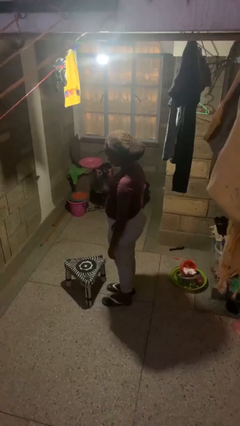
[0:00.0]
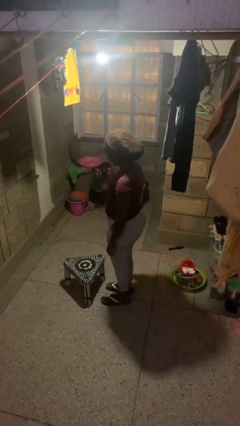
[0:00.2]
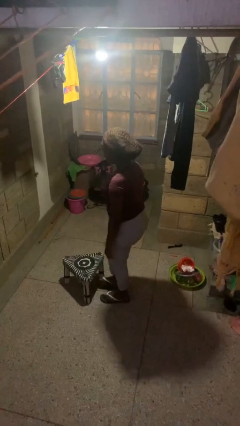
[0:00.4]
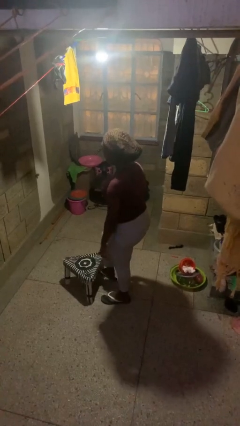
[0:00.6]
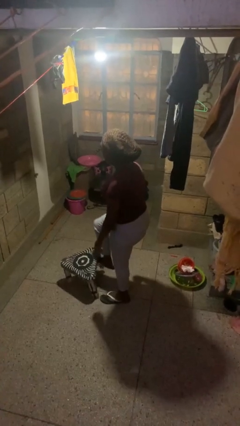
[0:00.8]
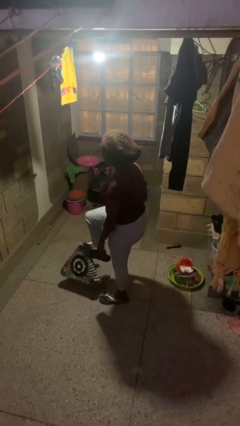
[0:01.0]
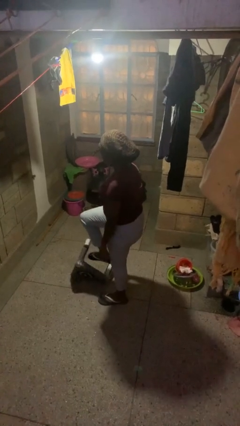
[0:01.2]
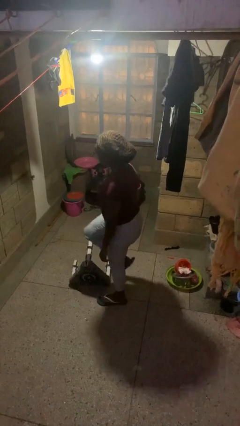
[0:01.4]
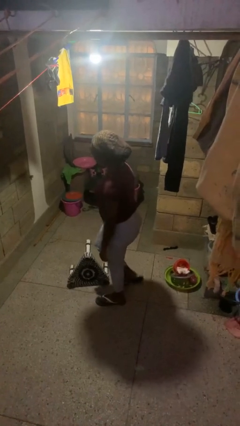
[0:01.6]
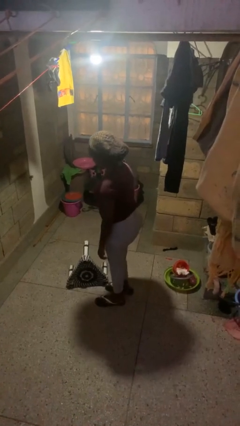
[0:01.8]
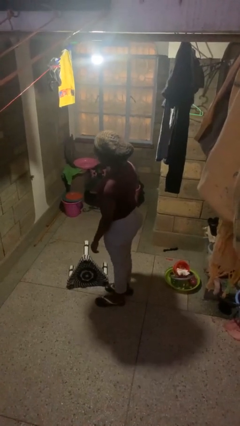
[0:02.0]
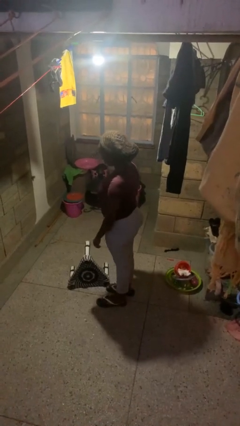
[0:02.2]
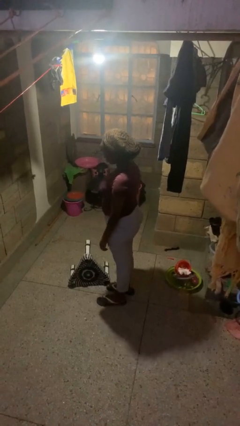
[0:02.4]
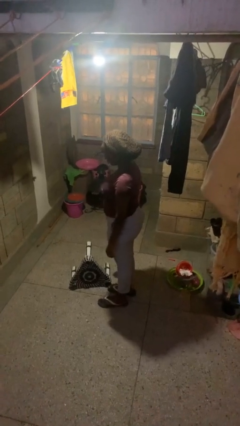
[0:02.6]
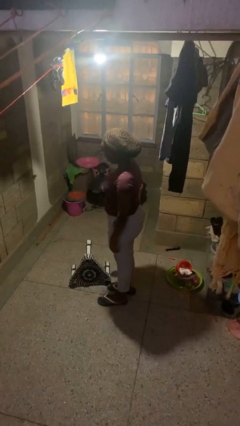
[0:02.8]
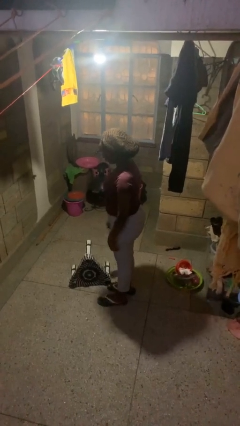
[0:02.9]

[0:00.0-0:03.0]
person knocks over furniture

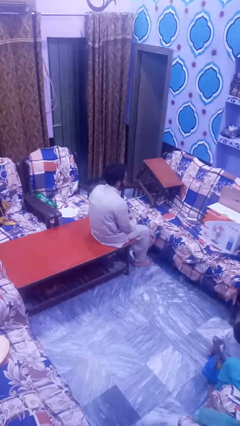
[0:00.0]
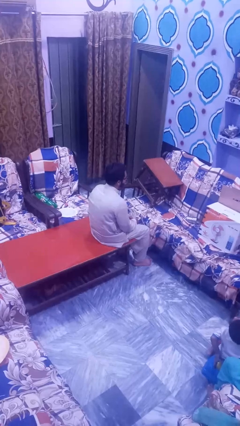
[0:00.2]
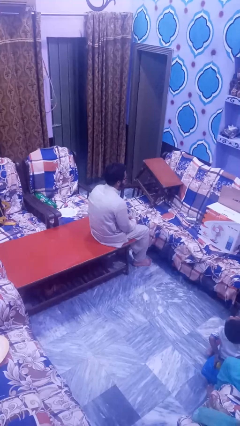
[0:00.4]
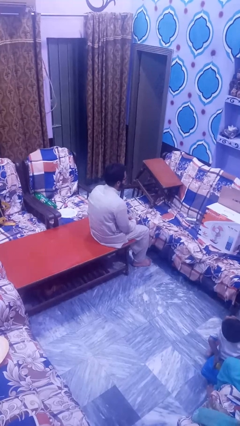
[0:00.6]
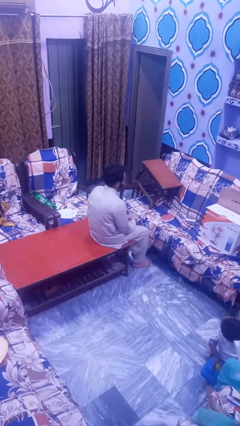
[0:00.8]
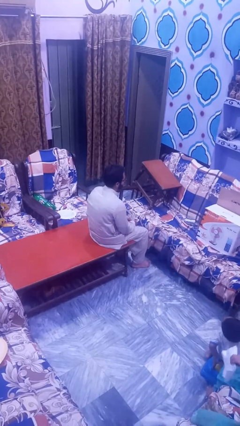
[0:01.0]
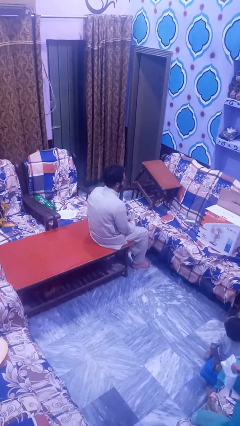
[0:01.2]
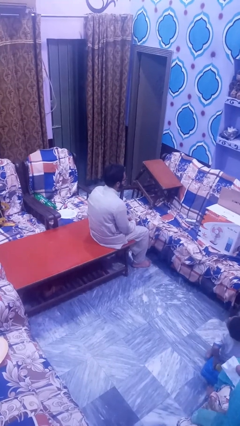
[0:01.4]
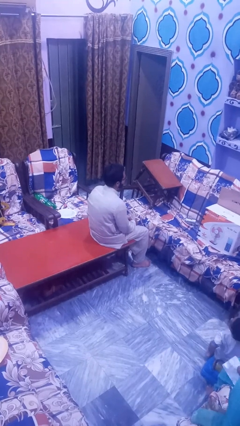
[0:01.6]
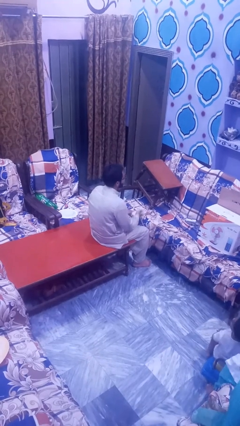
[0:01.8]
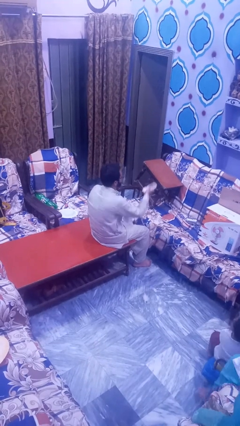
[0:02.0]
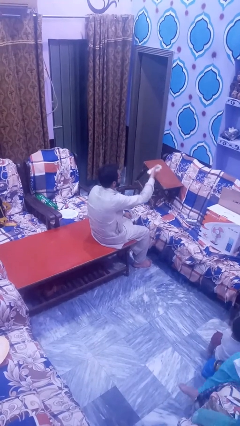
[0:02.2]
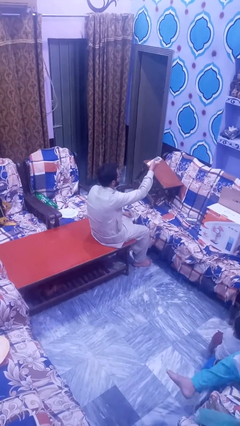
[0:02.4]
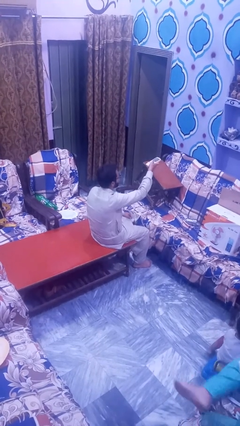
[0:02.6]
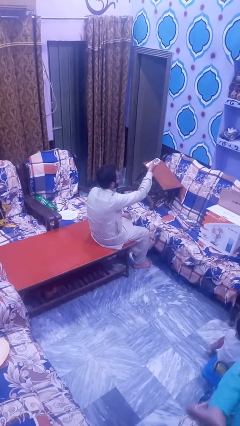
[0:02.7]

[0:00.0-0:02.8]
person uses television remote

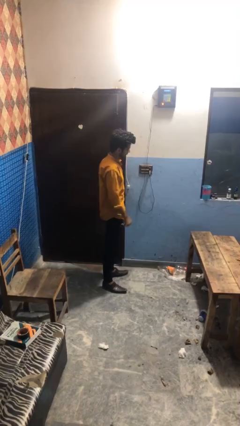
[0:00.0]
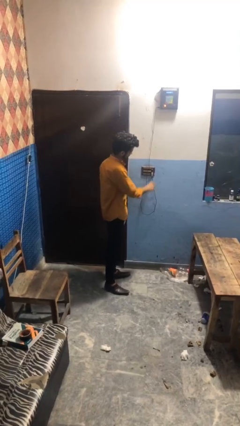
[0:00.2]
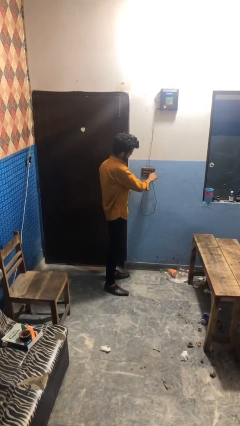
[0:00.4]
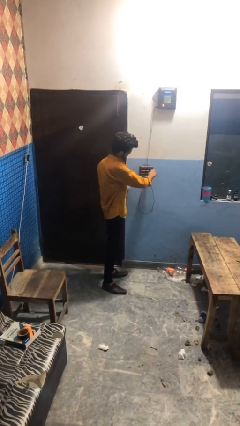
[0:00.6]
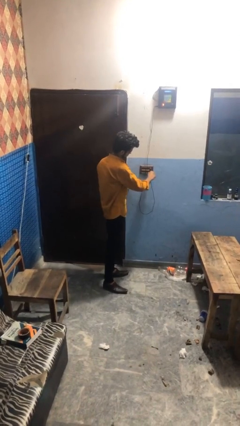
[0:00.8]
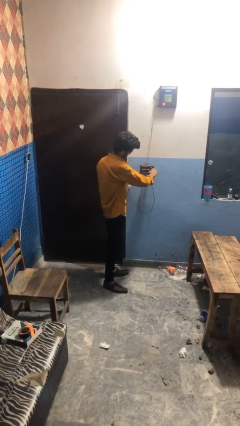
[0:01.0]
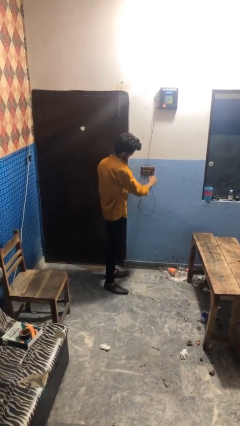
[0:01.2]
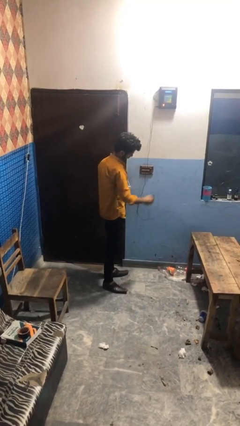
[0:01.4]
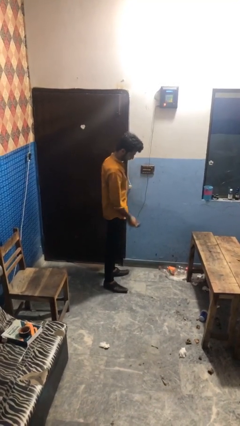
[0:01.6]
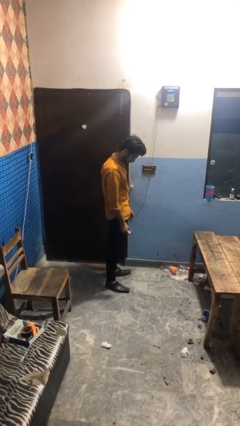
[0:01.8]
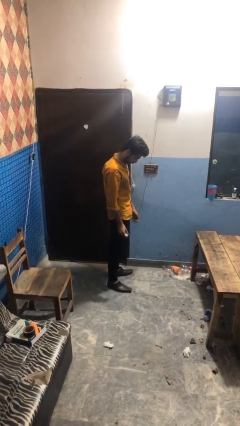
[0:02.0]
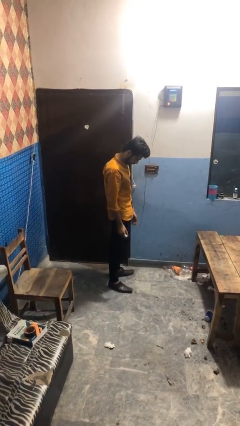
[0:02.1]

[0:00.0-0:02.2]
person unplugs from electrical socket

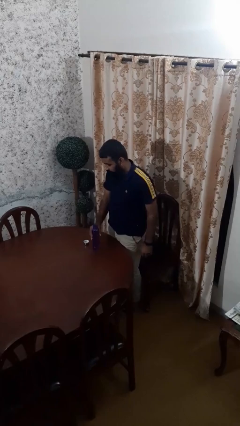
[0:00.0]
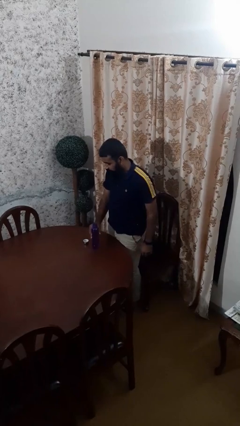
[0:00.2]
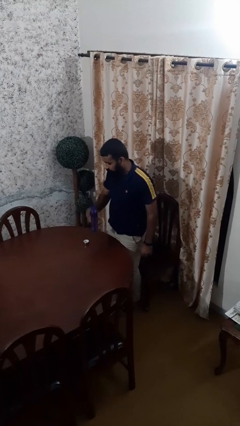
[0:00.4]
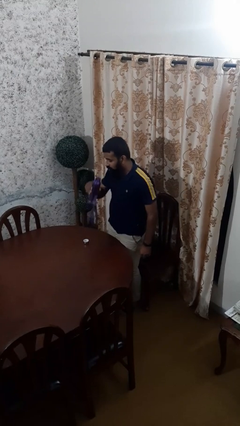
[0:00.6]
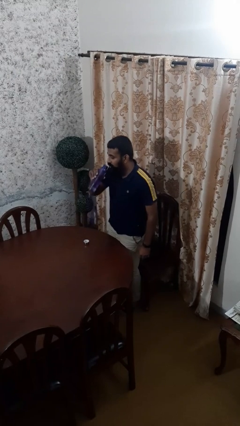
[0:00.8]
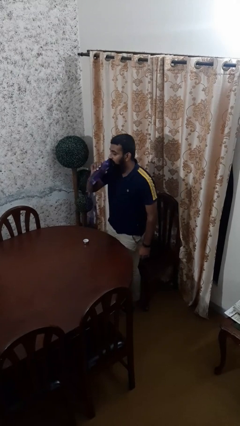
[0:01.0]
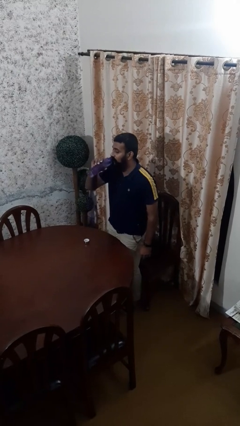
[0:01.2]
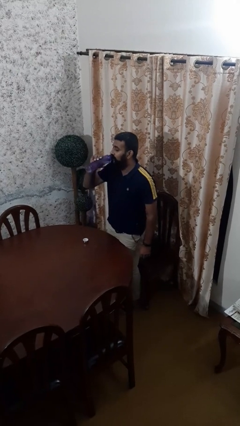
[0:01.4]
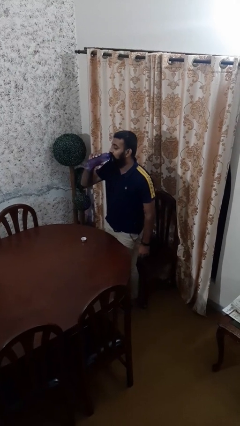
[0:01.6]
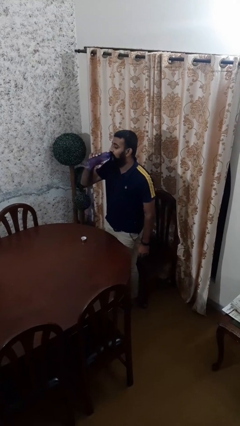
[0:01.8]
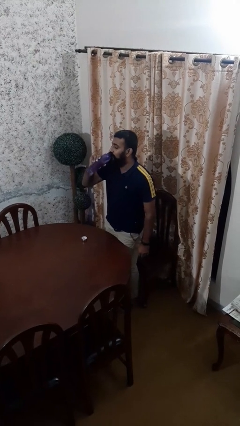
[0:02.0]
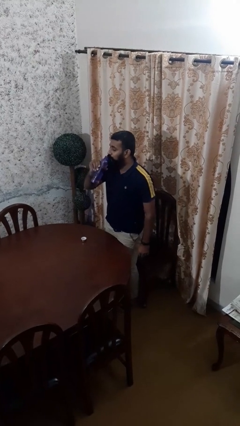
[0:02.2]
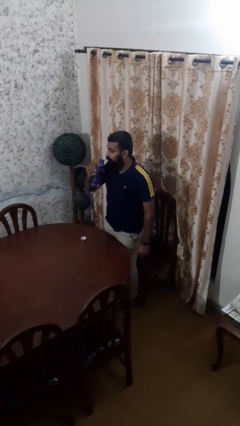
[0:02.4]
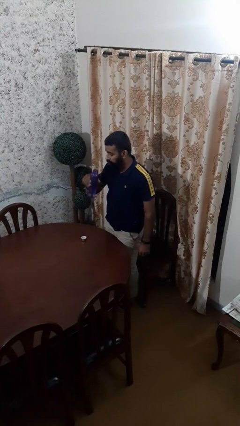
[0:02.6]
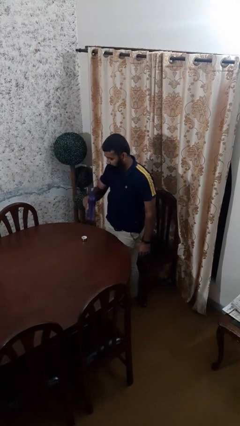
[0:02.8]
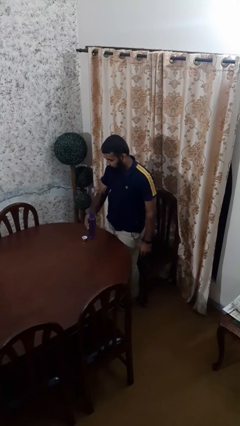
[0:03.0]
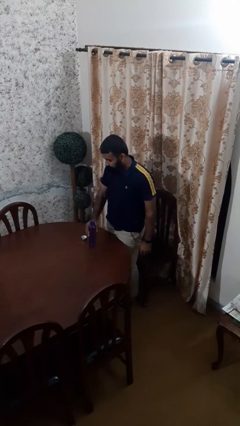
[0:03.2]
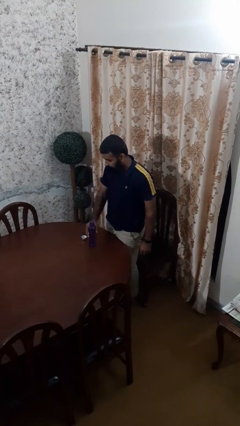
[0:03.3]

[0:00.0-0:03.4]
person drinks from bottle

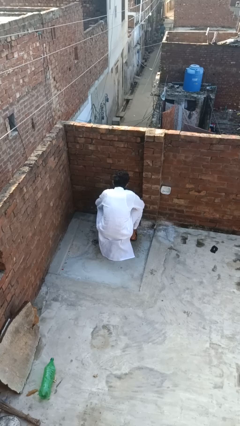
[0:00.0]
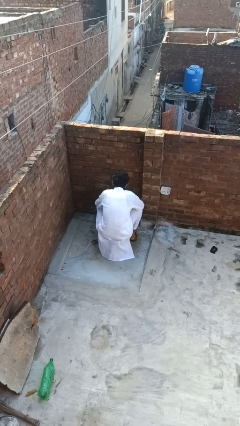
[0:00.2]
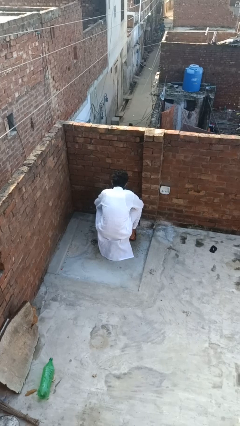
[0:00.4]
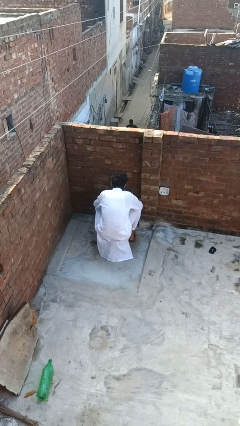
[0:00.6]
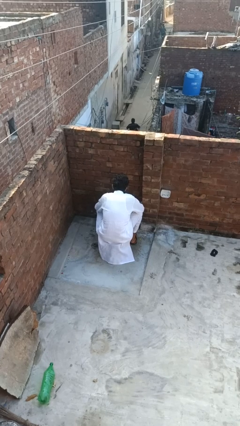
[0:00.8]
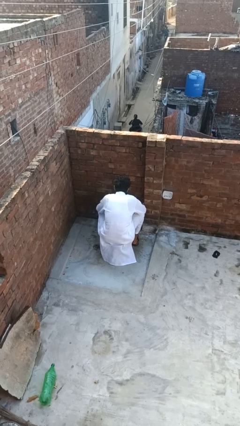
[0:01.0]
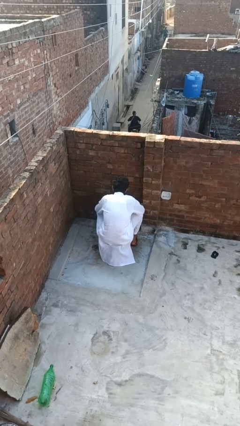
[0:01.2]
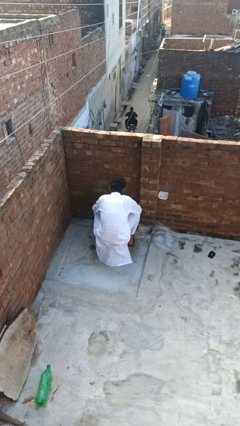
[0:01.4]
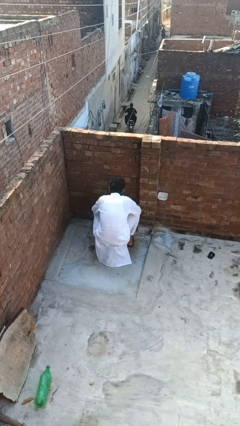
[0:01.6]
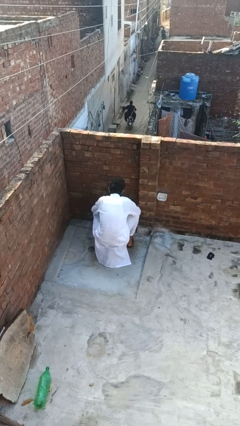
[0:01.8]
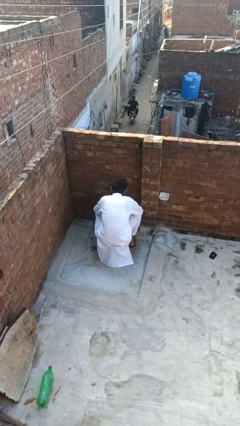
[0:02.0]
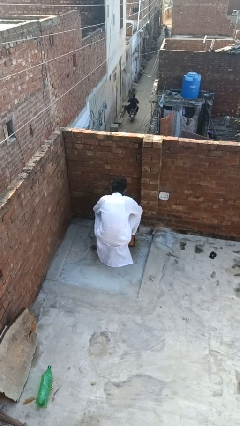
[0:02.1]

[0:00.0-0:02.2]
person turns off faucet

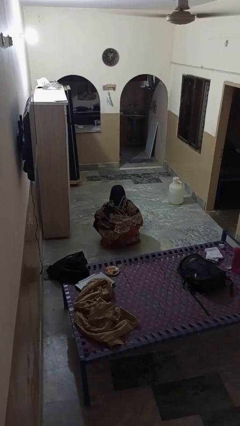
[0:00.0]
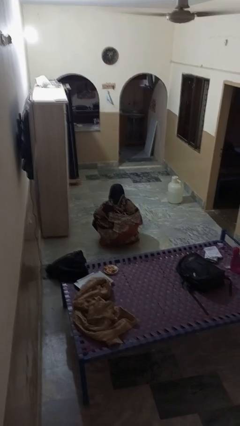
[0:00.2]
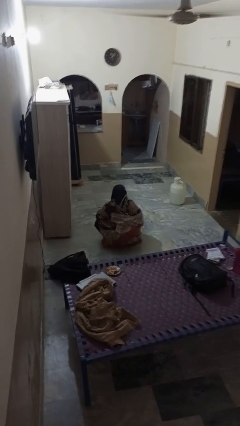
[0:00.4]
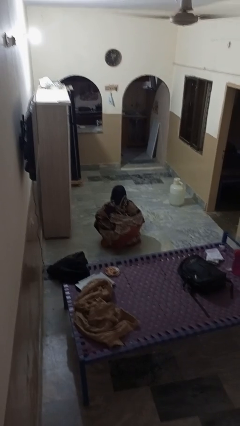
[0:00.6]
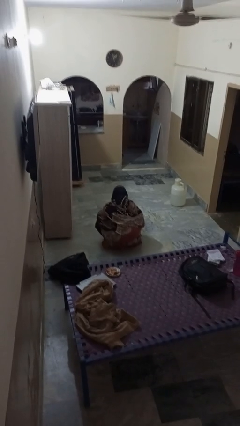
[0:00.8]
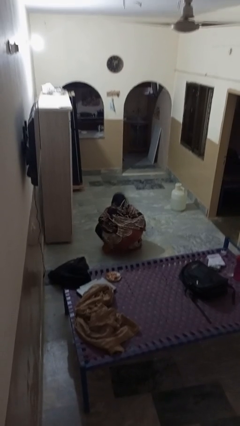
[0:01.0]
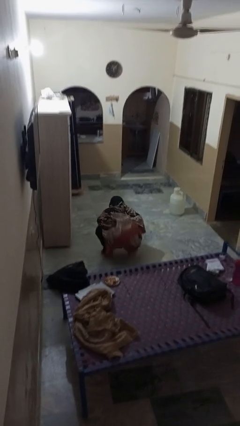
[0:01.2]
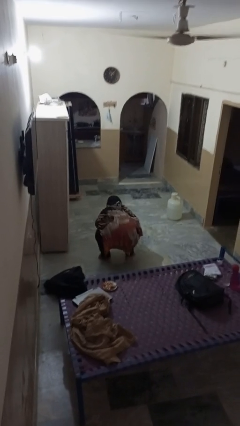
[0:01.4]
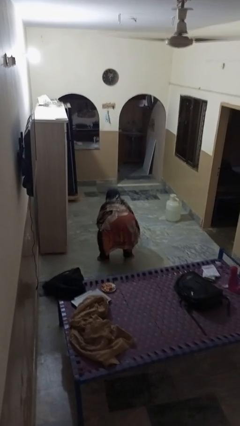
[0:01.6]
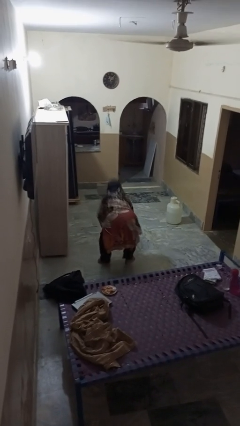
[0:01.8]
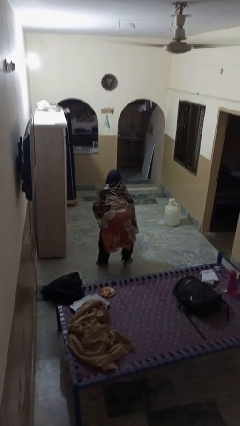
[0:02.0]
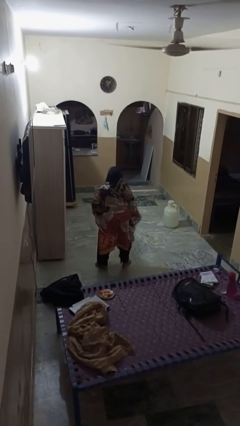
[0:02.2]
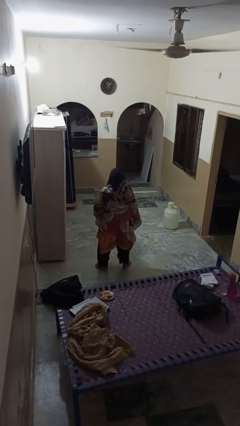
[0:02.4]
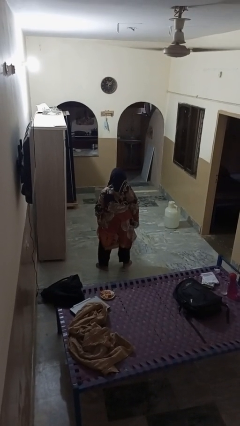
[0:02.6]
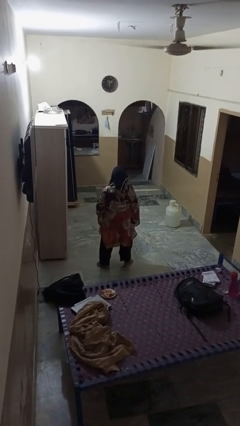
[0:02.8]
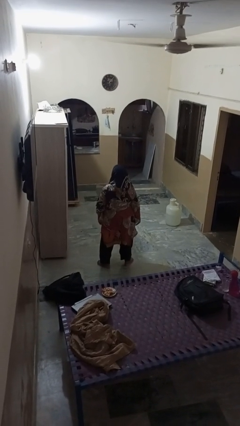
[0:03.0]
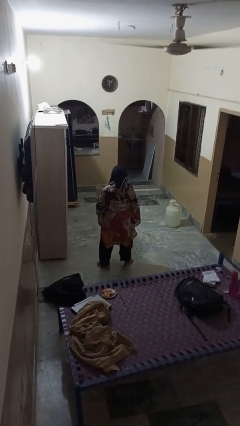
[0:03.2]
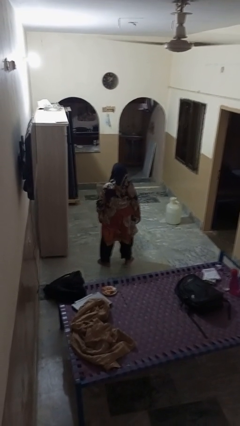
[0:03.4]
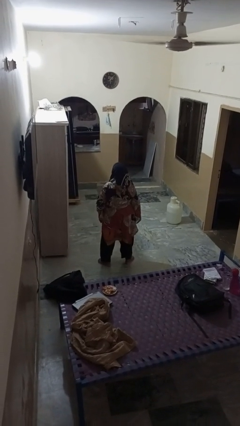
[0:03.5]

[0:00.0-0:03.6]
person stands up

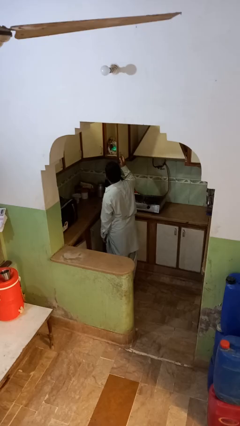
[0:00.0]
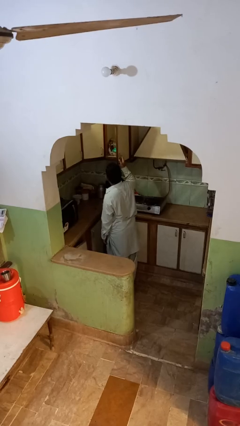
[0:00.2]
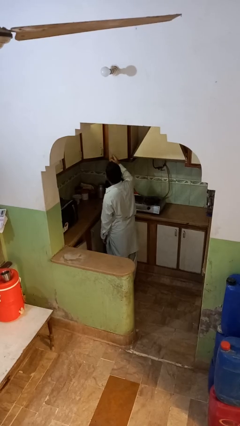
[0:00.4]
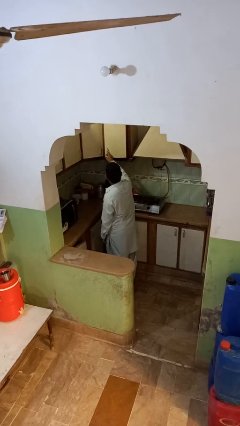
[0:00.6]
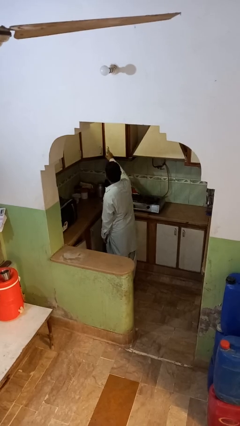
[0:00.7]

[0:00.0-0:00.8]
person closes cabinet
